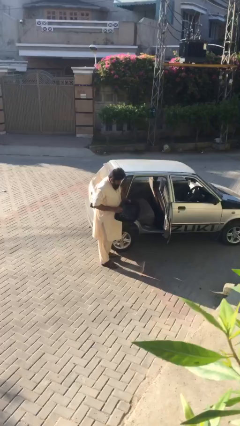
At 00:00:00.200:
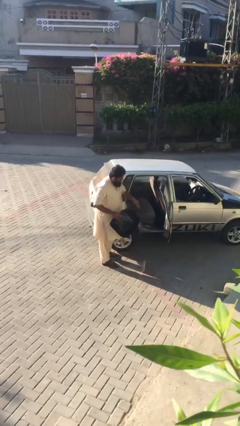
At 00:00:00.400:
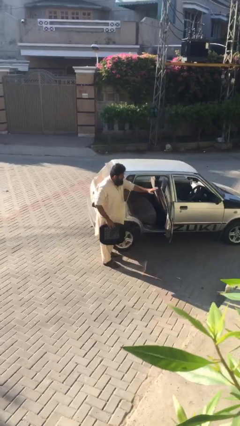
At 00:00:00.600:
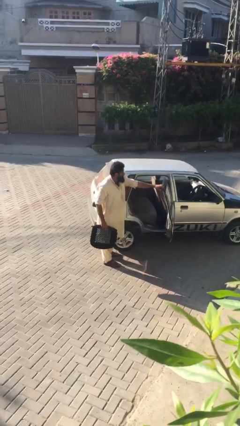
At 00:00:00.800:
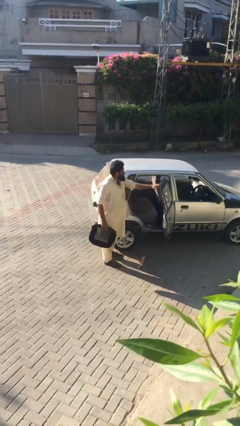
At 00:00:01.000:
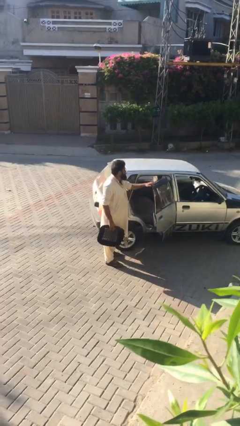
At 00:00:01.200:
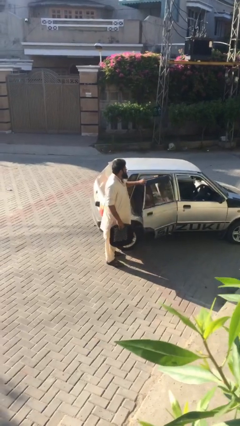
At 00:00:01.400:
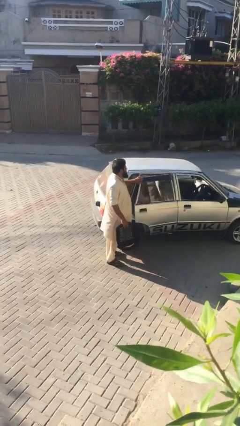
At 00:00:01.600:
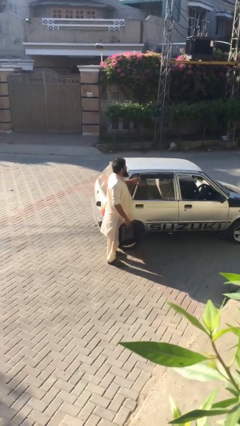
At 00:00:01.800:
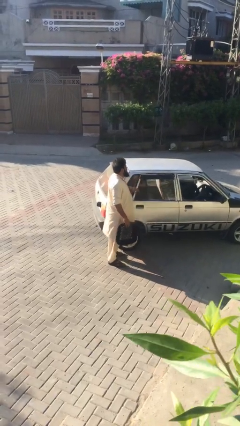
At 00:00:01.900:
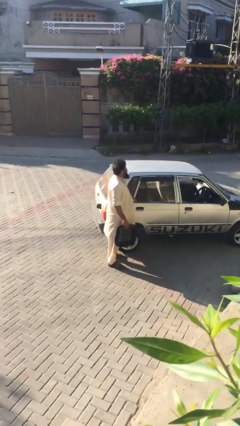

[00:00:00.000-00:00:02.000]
person closes car door

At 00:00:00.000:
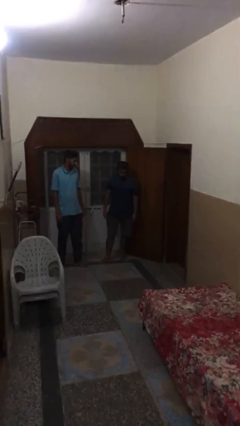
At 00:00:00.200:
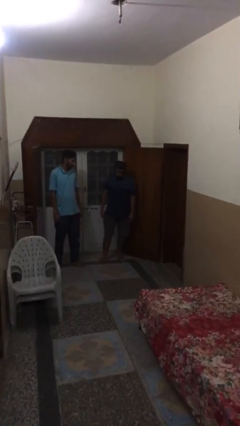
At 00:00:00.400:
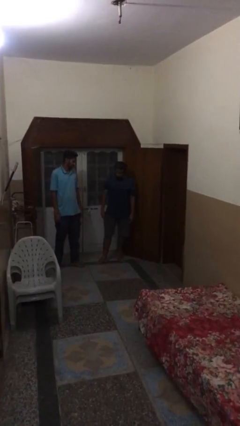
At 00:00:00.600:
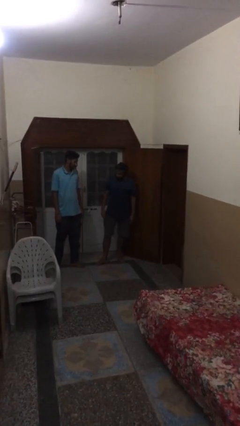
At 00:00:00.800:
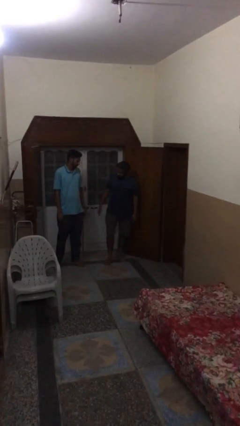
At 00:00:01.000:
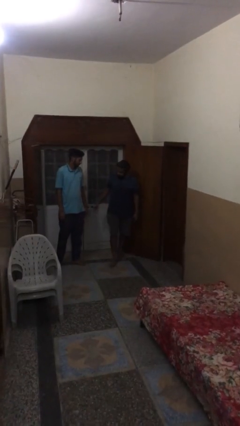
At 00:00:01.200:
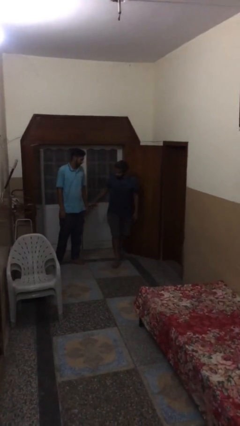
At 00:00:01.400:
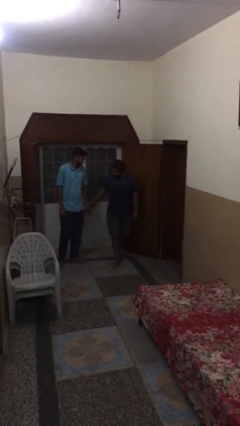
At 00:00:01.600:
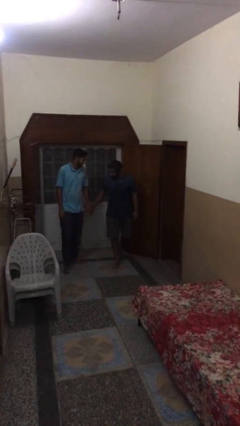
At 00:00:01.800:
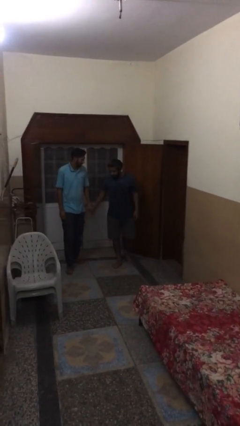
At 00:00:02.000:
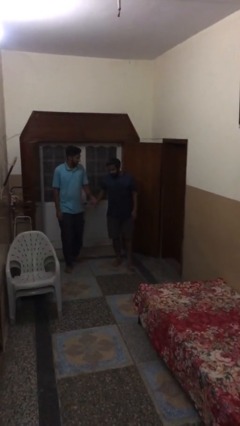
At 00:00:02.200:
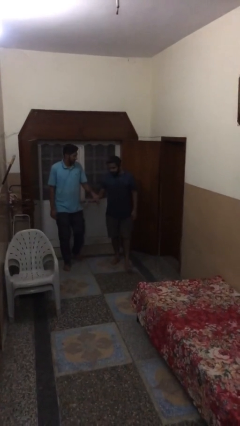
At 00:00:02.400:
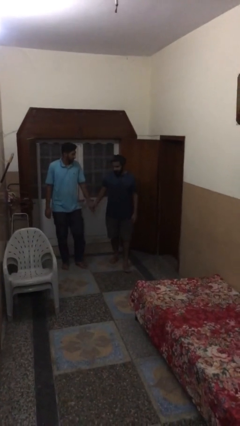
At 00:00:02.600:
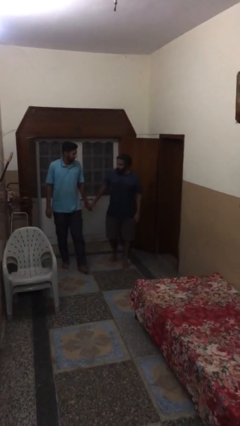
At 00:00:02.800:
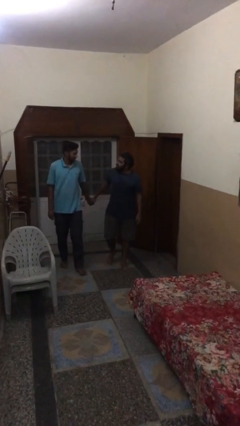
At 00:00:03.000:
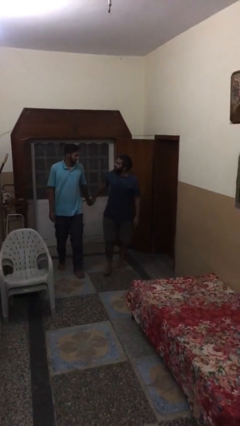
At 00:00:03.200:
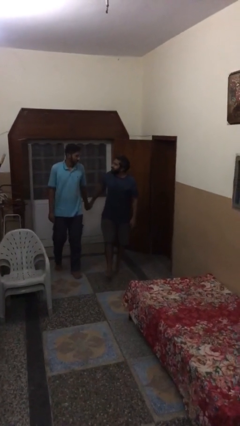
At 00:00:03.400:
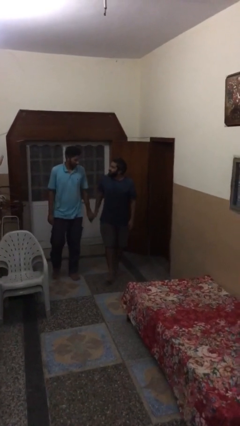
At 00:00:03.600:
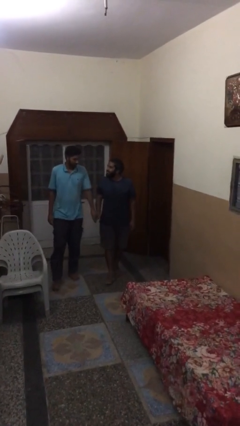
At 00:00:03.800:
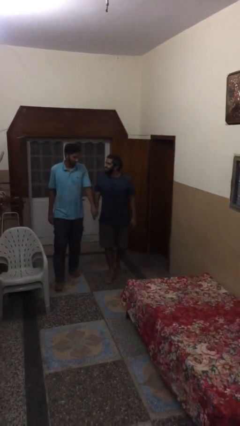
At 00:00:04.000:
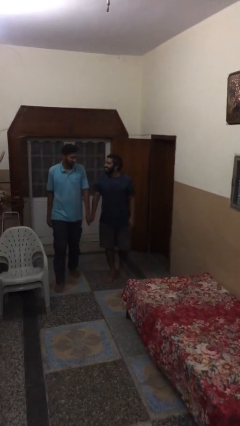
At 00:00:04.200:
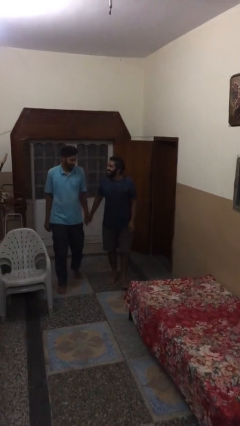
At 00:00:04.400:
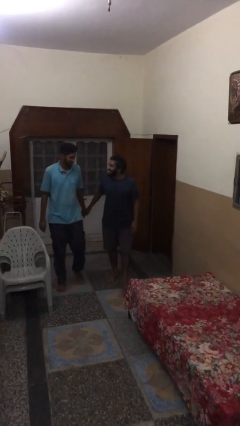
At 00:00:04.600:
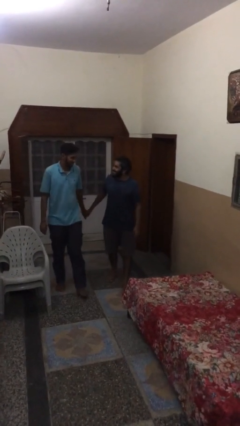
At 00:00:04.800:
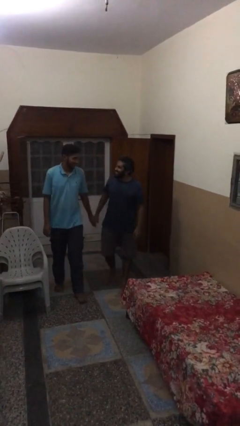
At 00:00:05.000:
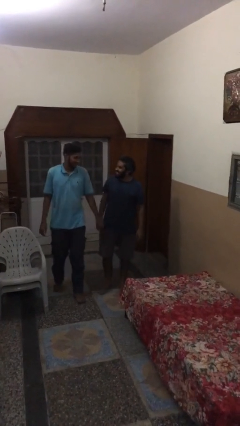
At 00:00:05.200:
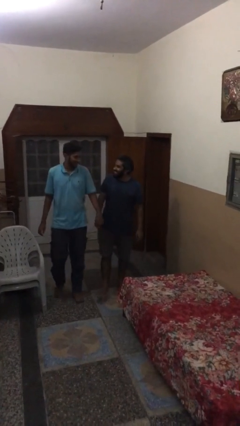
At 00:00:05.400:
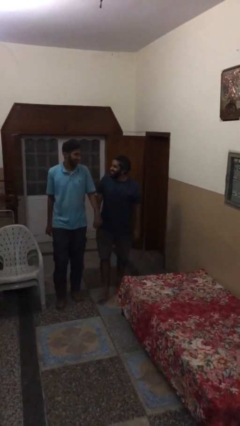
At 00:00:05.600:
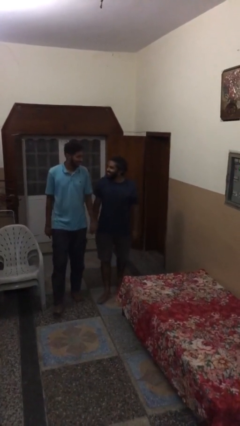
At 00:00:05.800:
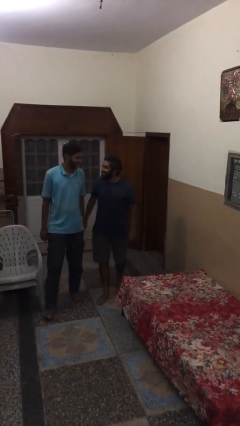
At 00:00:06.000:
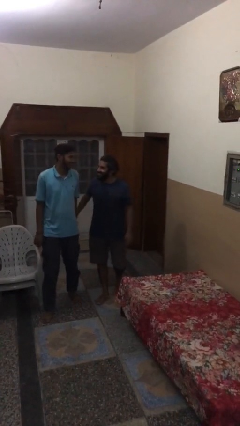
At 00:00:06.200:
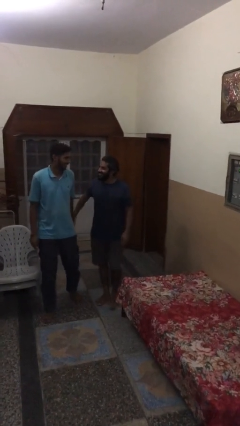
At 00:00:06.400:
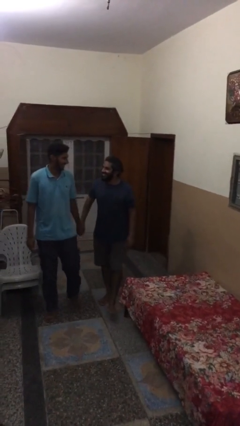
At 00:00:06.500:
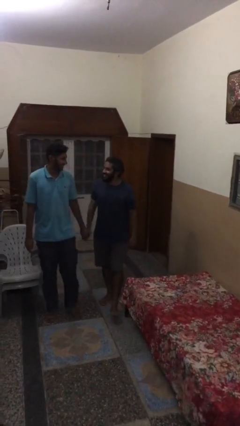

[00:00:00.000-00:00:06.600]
person holds hand

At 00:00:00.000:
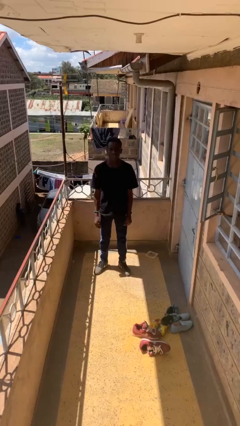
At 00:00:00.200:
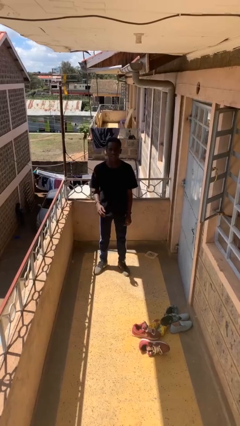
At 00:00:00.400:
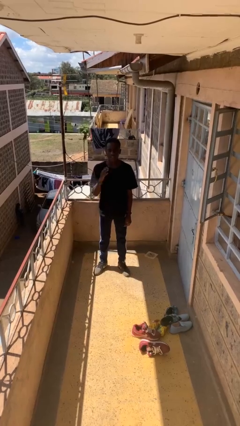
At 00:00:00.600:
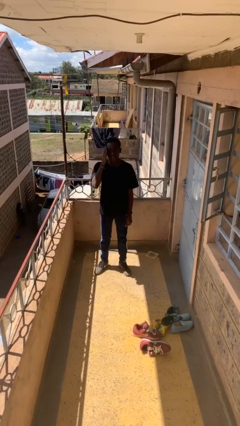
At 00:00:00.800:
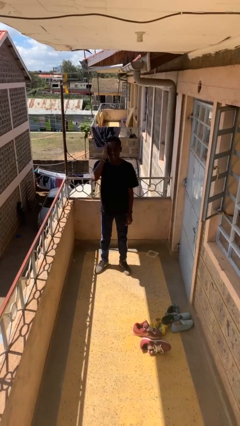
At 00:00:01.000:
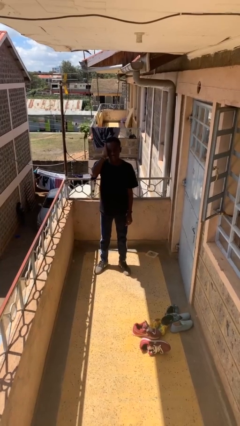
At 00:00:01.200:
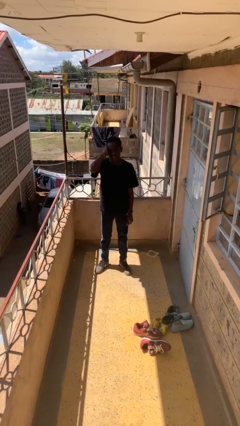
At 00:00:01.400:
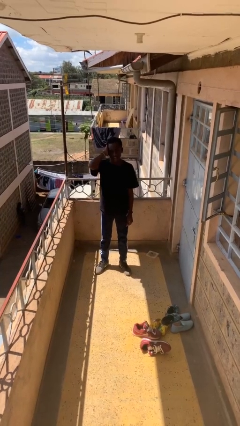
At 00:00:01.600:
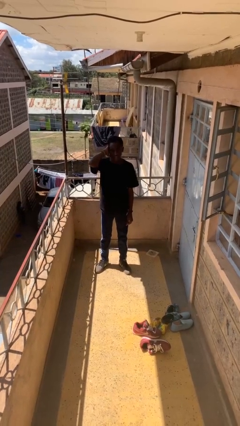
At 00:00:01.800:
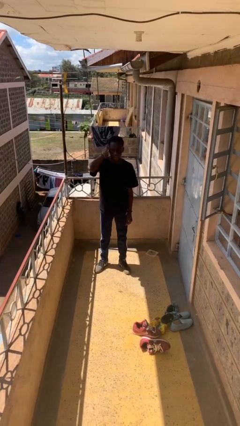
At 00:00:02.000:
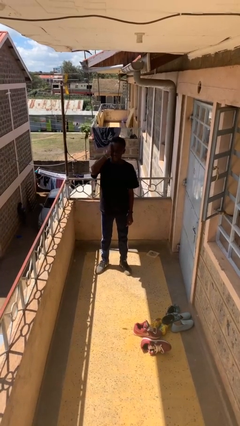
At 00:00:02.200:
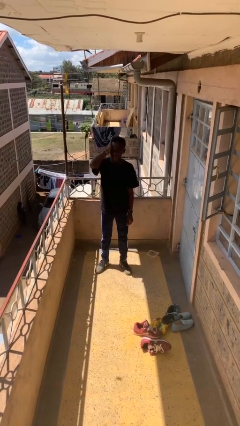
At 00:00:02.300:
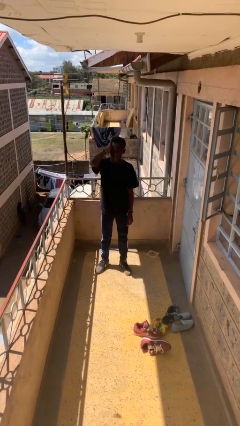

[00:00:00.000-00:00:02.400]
person strokes hair

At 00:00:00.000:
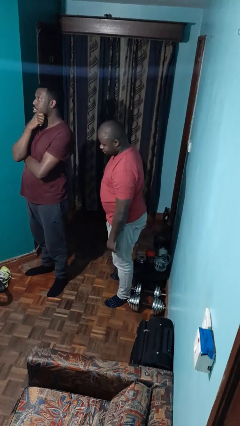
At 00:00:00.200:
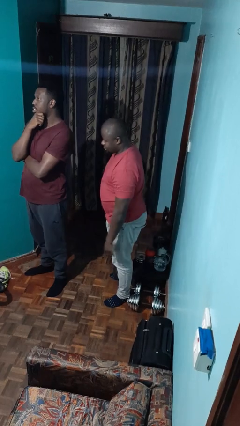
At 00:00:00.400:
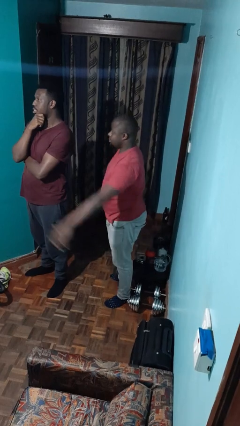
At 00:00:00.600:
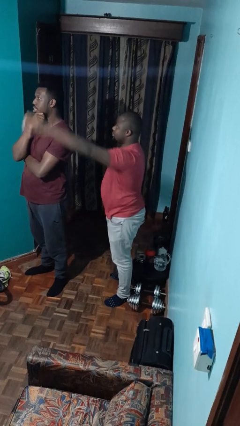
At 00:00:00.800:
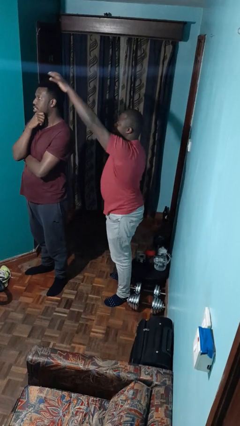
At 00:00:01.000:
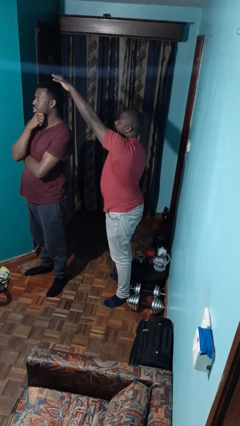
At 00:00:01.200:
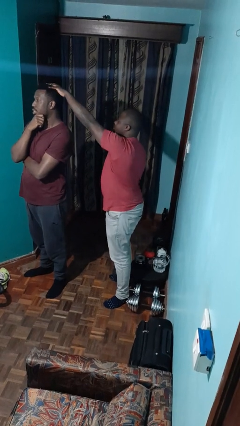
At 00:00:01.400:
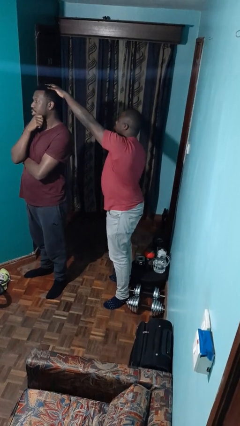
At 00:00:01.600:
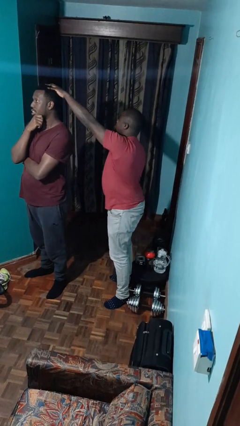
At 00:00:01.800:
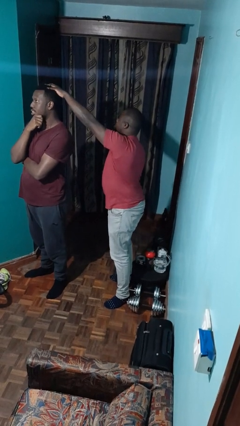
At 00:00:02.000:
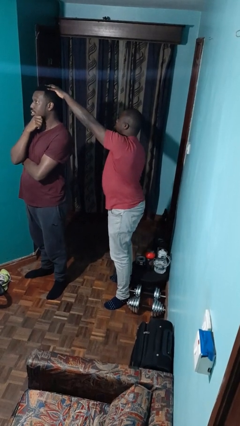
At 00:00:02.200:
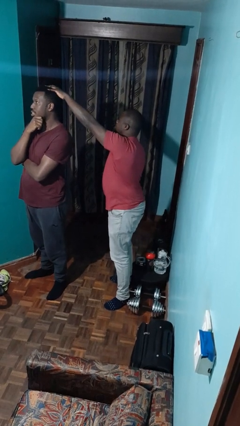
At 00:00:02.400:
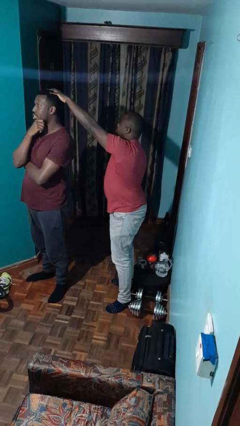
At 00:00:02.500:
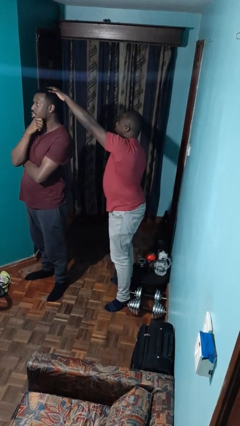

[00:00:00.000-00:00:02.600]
person grabs person by hair

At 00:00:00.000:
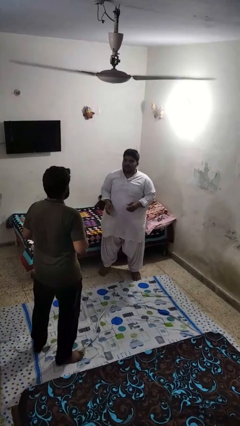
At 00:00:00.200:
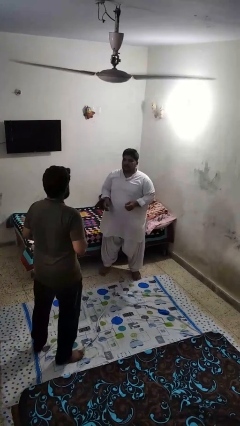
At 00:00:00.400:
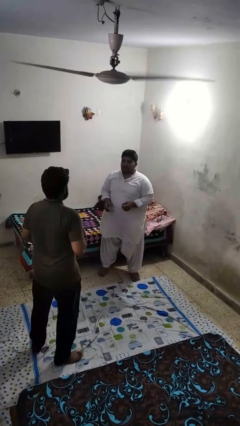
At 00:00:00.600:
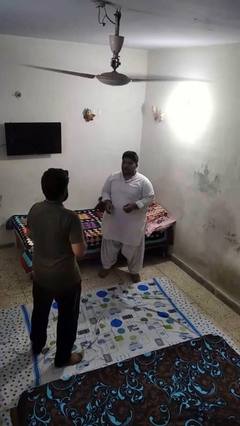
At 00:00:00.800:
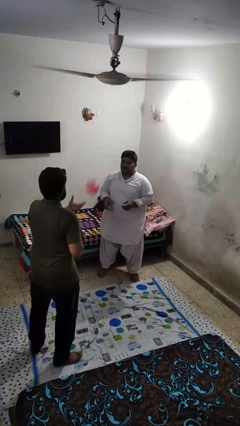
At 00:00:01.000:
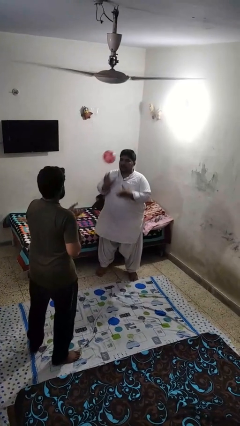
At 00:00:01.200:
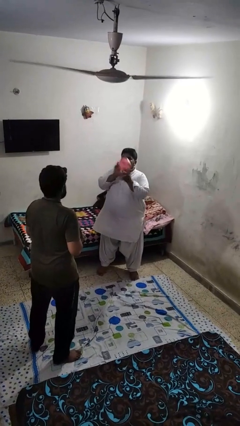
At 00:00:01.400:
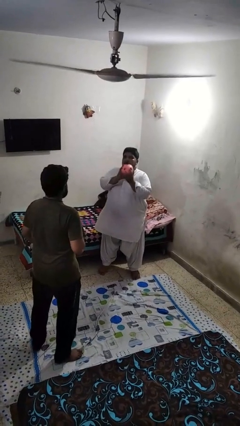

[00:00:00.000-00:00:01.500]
person catches object from person

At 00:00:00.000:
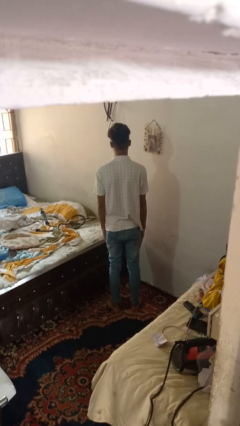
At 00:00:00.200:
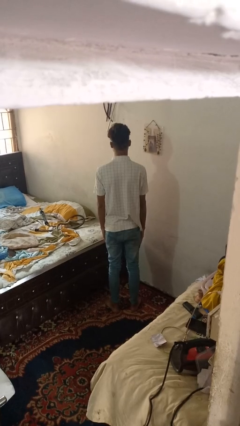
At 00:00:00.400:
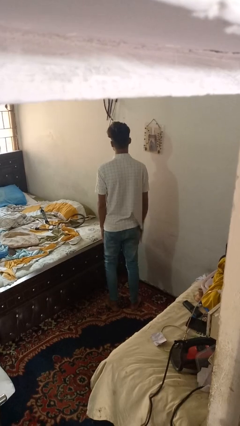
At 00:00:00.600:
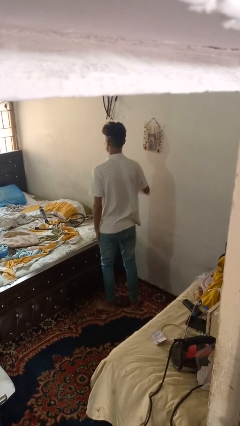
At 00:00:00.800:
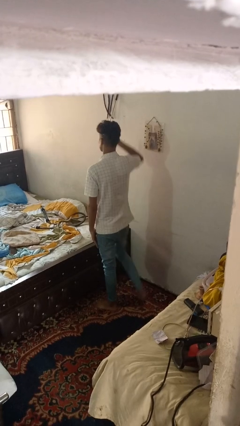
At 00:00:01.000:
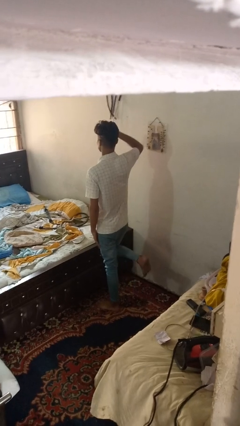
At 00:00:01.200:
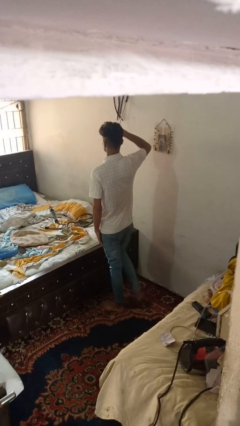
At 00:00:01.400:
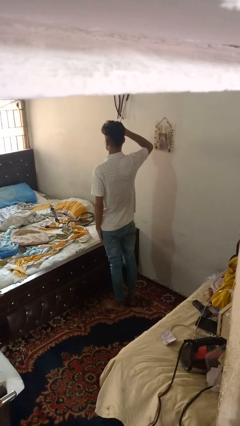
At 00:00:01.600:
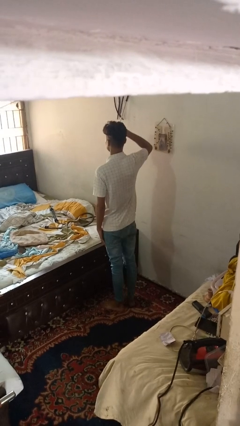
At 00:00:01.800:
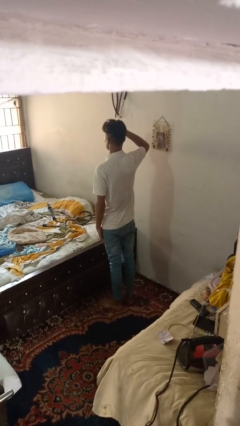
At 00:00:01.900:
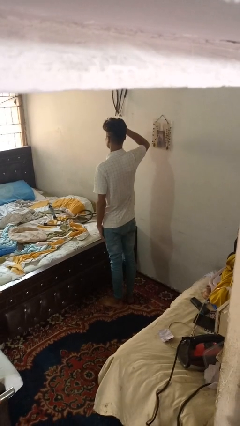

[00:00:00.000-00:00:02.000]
person salutes
